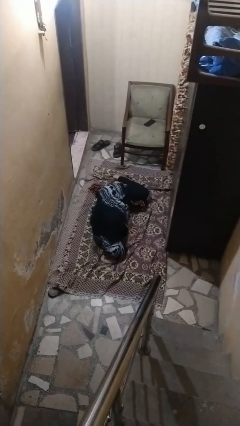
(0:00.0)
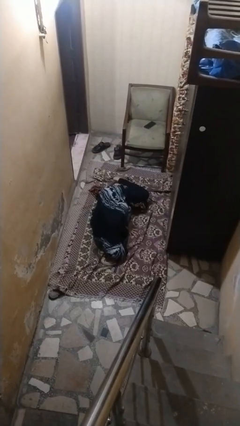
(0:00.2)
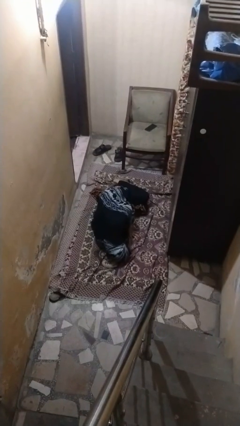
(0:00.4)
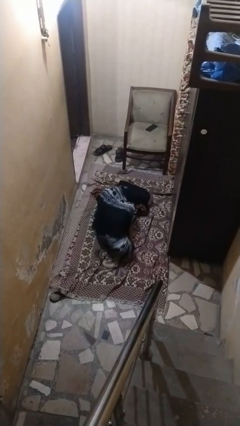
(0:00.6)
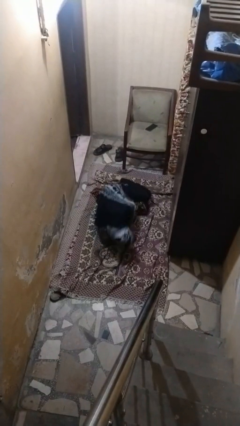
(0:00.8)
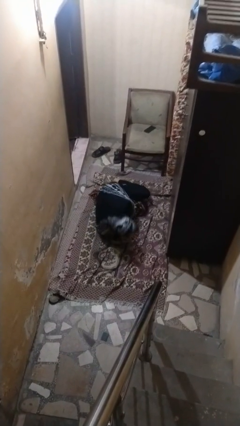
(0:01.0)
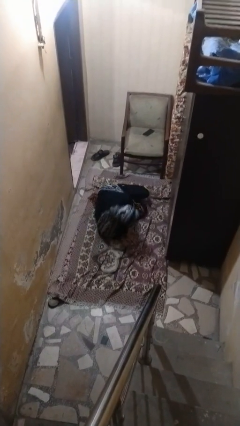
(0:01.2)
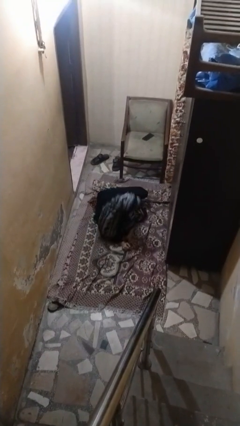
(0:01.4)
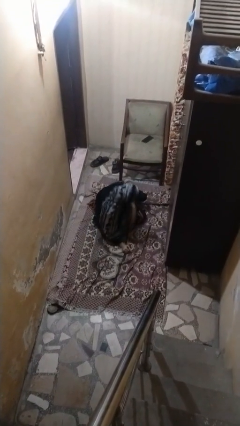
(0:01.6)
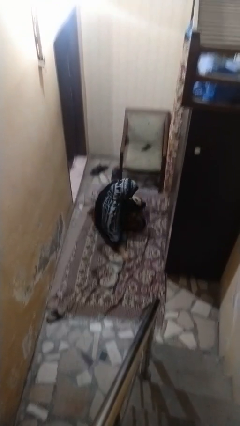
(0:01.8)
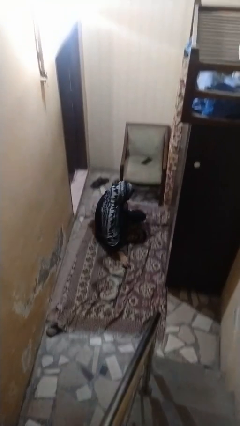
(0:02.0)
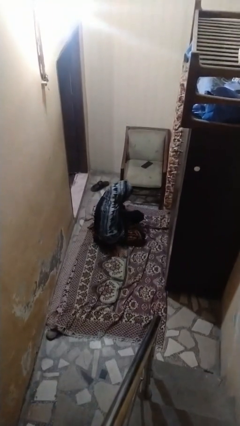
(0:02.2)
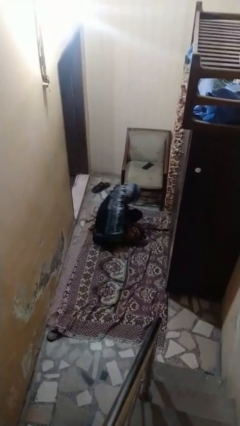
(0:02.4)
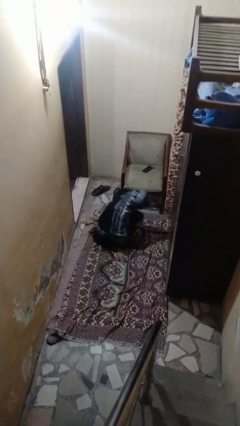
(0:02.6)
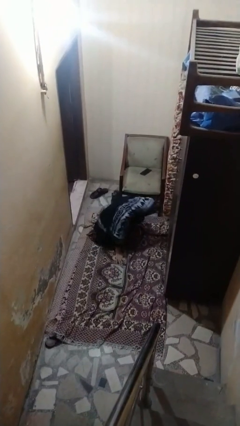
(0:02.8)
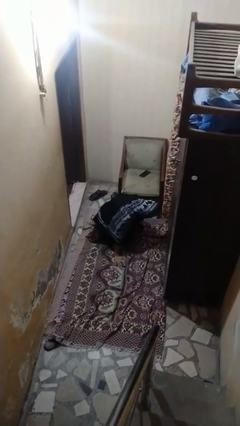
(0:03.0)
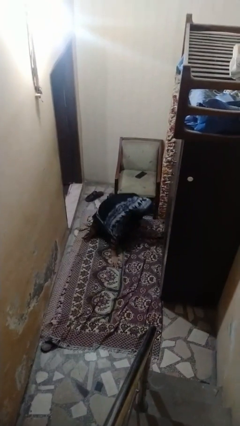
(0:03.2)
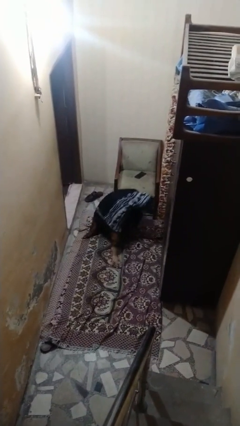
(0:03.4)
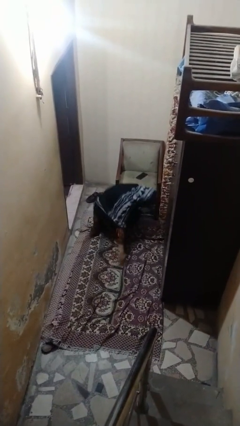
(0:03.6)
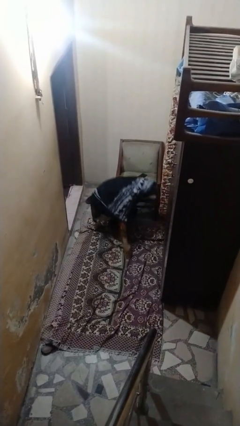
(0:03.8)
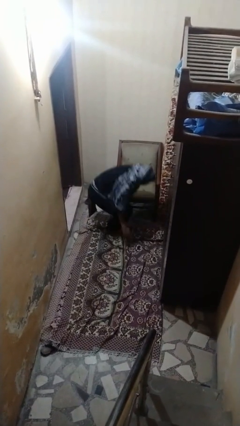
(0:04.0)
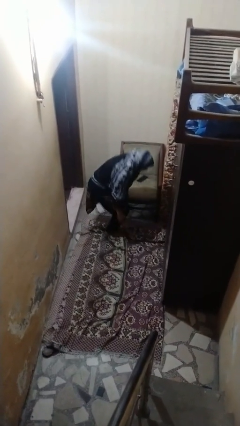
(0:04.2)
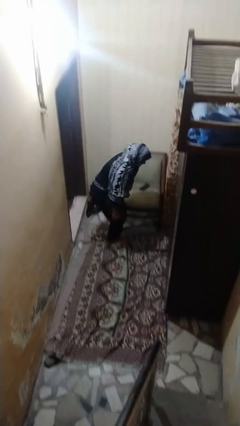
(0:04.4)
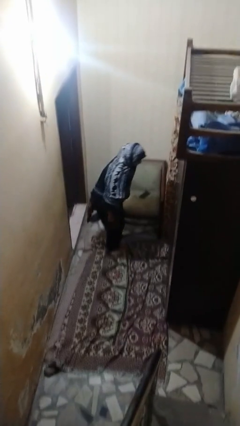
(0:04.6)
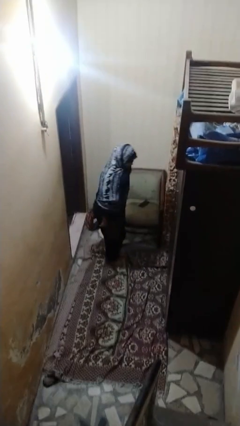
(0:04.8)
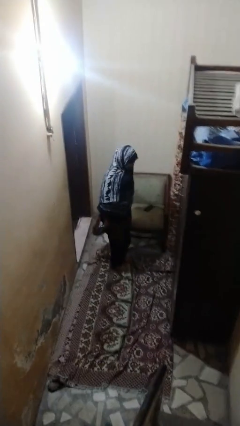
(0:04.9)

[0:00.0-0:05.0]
person stands up from floor

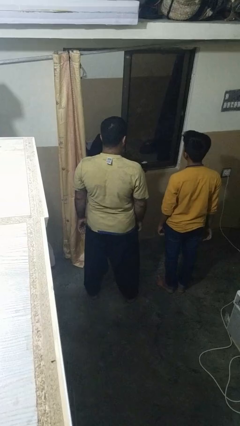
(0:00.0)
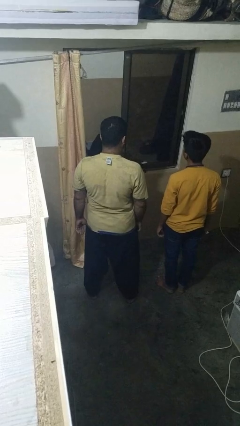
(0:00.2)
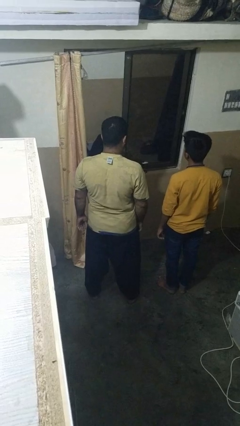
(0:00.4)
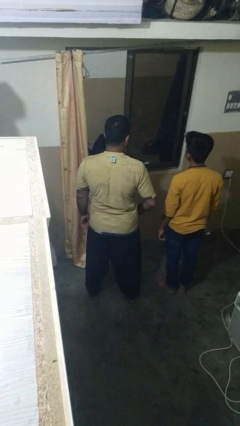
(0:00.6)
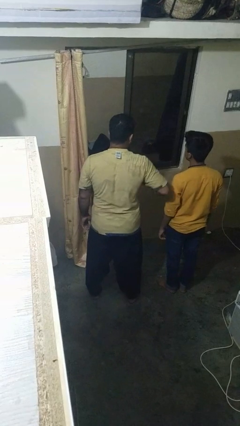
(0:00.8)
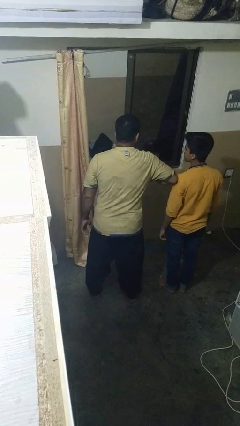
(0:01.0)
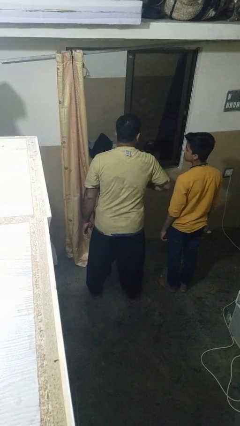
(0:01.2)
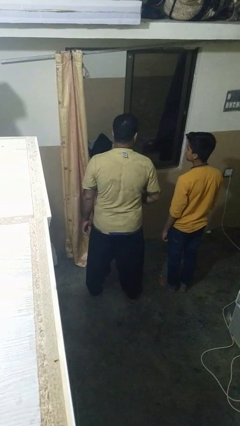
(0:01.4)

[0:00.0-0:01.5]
person nudges person with elbow

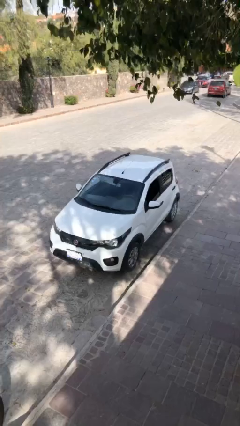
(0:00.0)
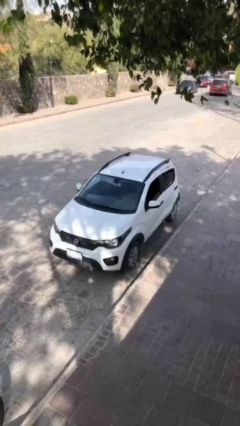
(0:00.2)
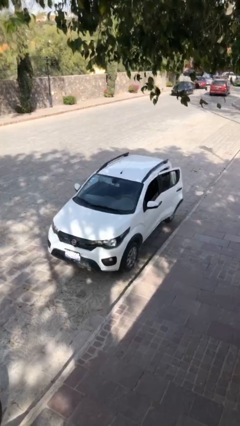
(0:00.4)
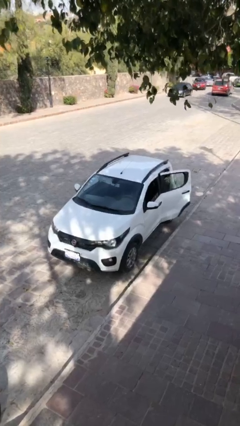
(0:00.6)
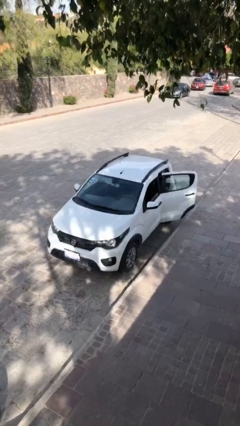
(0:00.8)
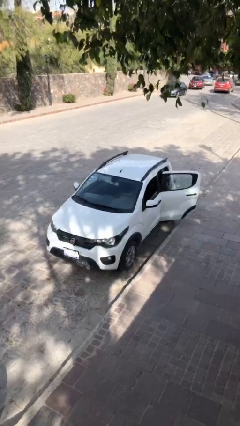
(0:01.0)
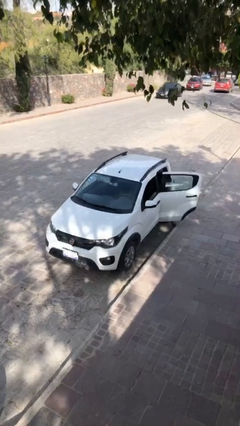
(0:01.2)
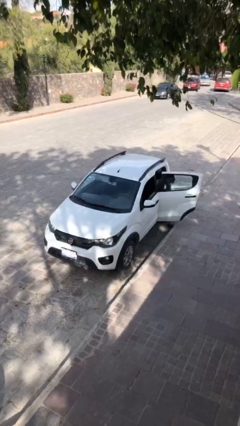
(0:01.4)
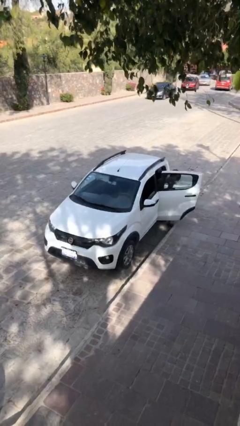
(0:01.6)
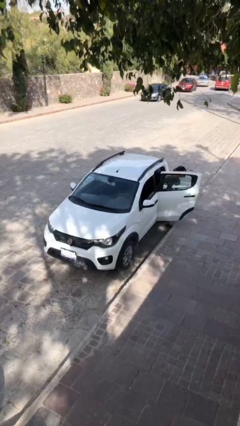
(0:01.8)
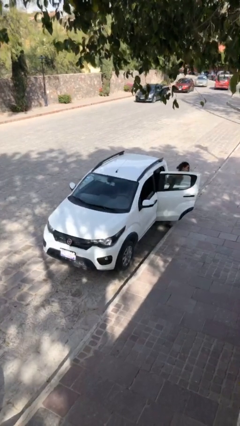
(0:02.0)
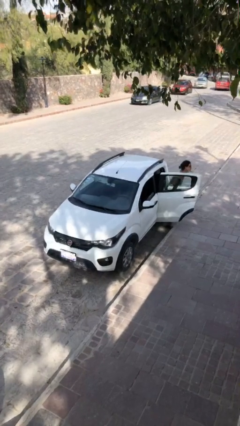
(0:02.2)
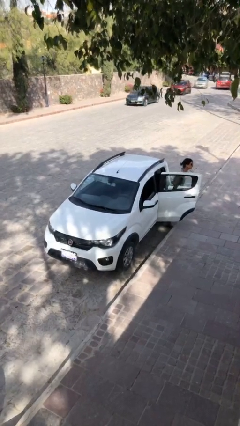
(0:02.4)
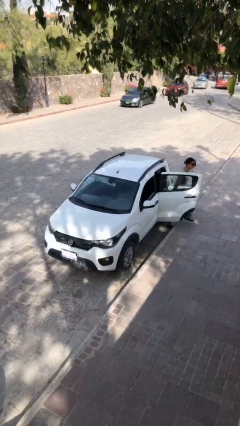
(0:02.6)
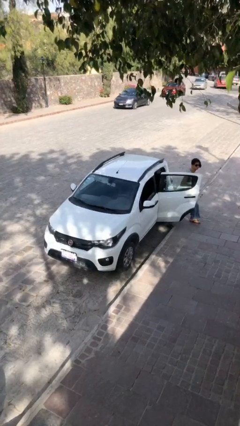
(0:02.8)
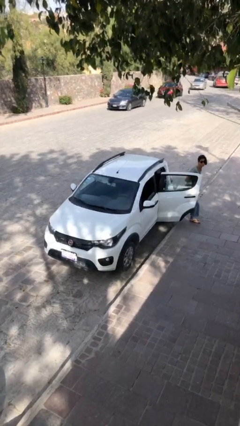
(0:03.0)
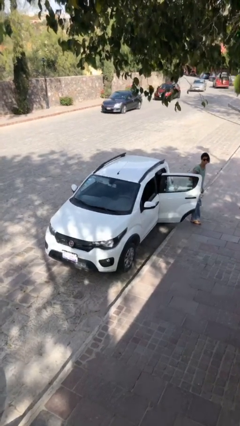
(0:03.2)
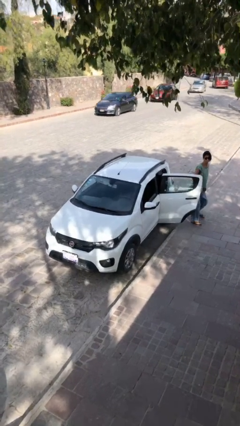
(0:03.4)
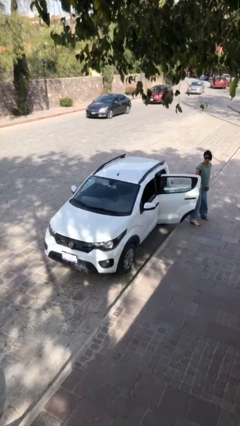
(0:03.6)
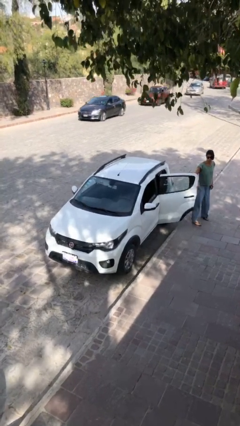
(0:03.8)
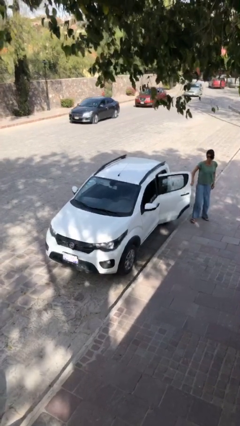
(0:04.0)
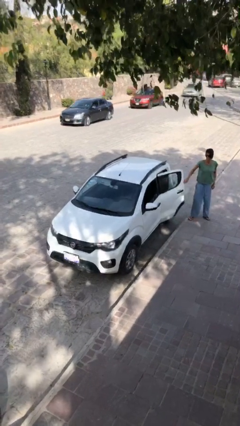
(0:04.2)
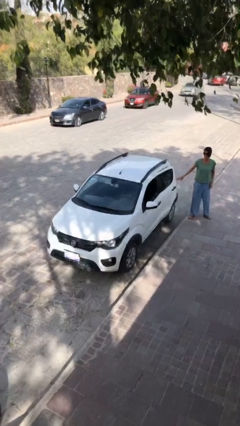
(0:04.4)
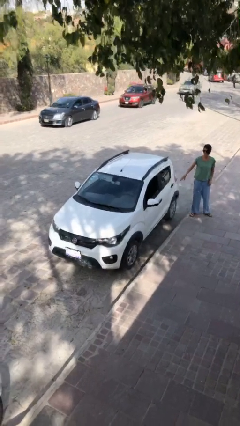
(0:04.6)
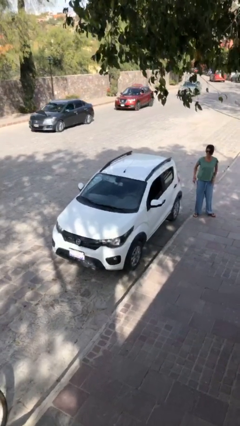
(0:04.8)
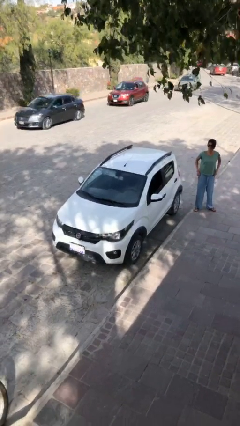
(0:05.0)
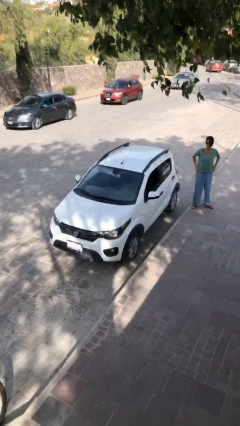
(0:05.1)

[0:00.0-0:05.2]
car drops off person

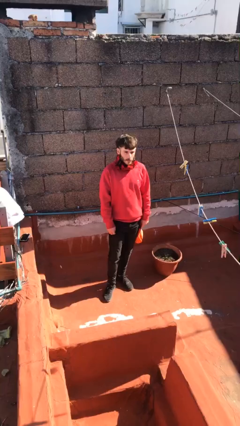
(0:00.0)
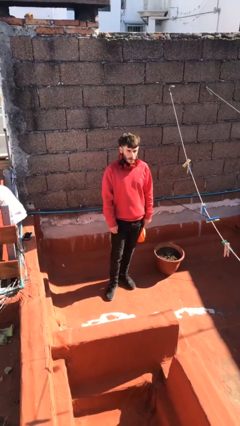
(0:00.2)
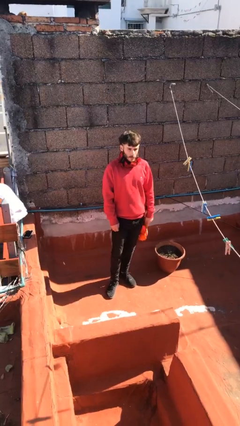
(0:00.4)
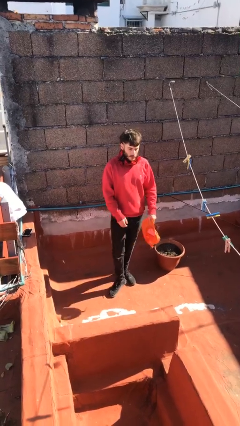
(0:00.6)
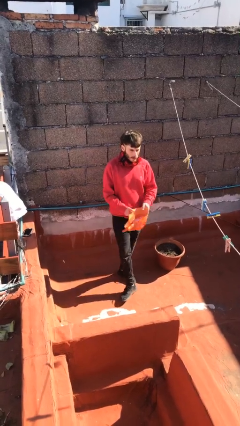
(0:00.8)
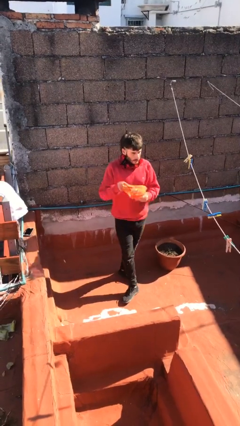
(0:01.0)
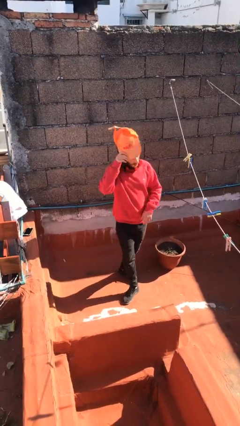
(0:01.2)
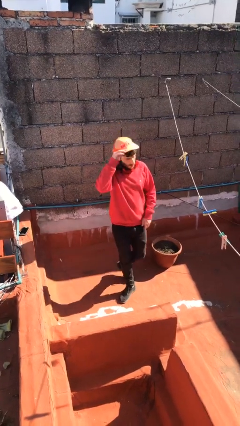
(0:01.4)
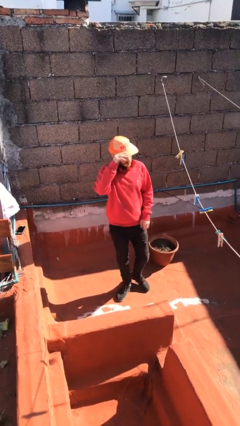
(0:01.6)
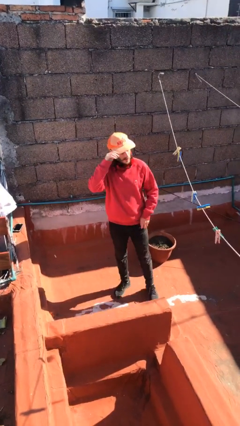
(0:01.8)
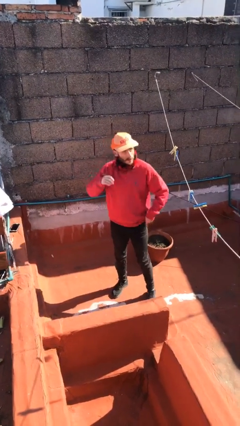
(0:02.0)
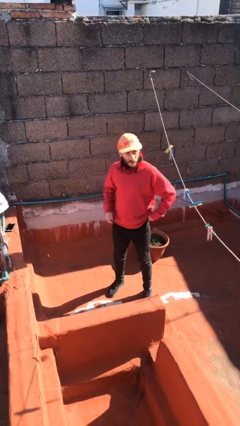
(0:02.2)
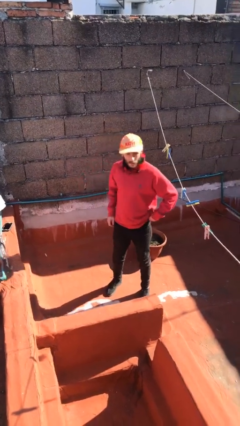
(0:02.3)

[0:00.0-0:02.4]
person puts on hat

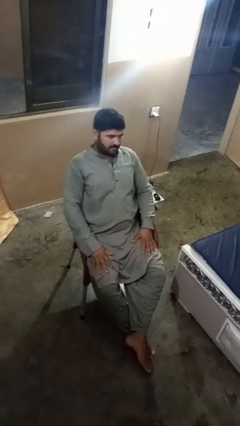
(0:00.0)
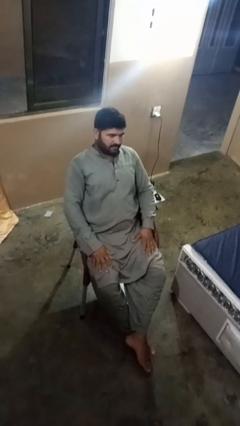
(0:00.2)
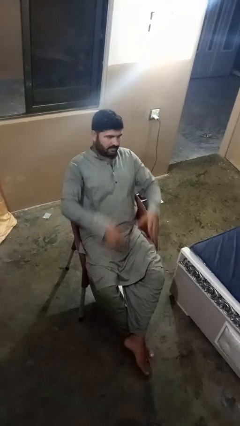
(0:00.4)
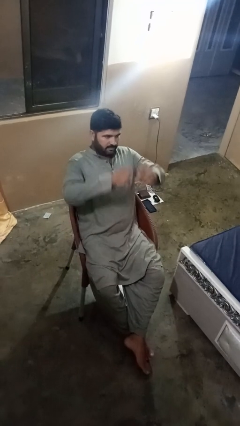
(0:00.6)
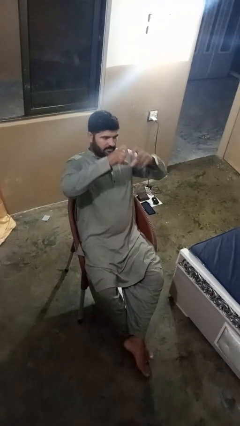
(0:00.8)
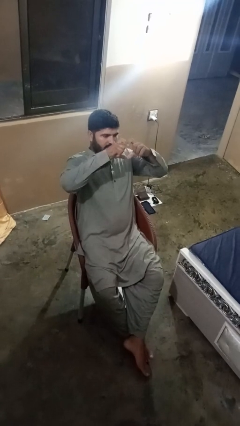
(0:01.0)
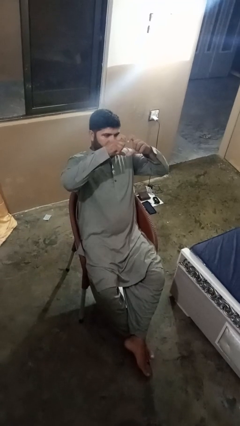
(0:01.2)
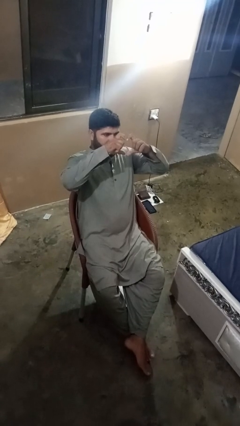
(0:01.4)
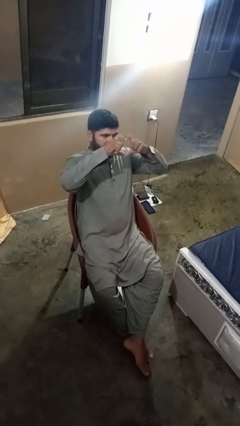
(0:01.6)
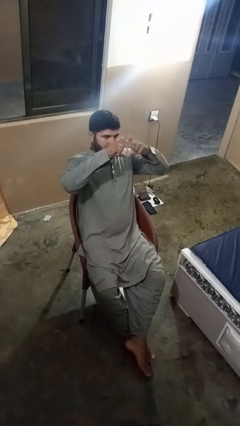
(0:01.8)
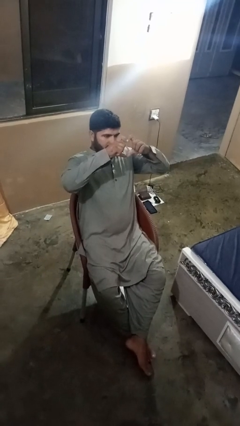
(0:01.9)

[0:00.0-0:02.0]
person gestures heart

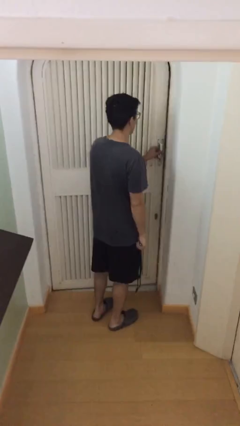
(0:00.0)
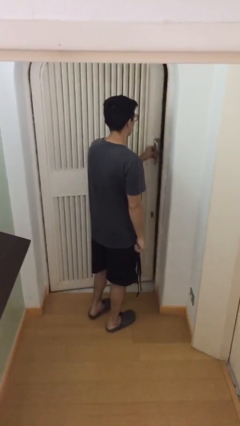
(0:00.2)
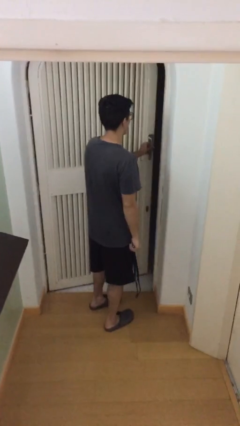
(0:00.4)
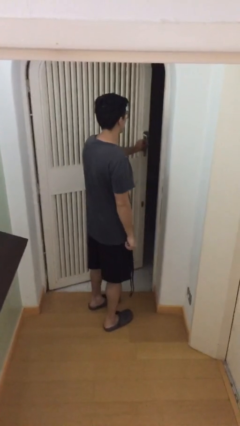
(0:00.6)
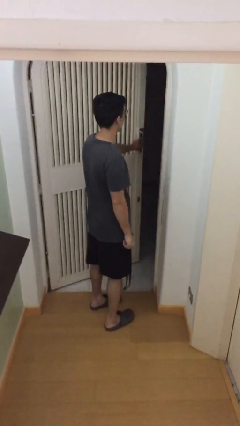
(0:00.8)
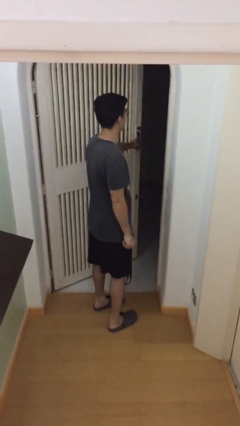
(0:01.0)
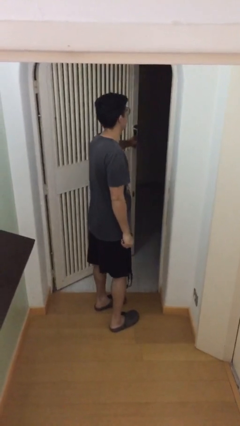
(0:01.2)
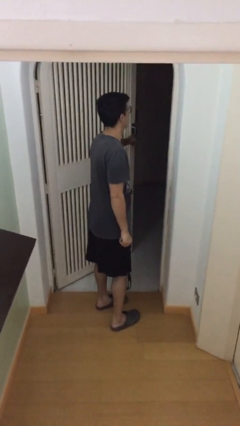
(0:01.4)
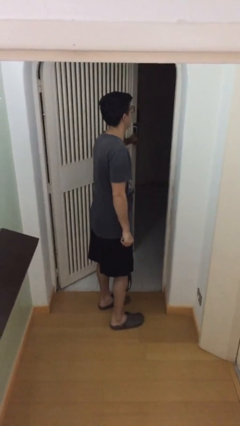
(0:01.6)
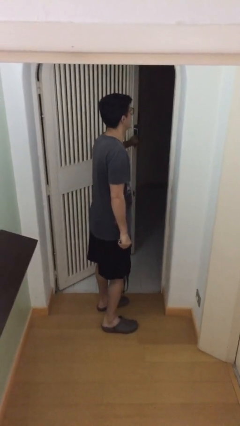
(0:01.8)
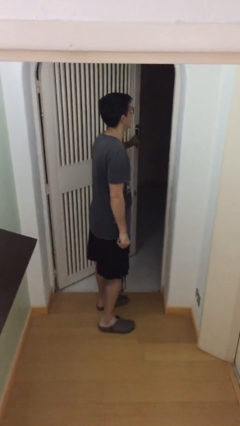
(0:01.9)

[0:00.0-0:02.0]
person opens facility door
